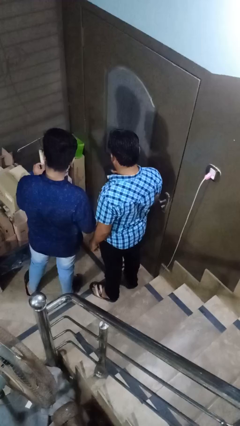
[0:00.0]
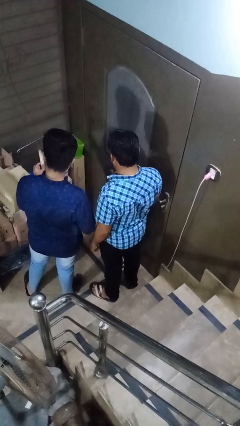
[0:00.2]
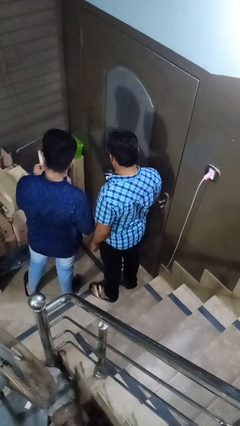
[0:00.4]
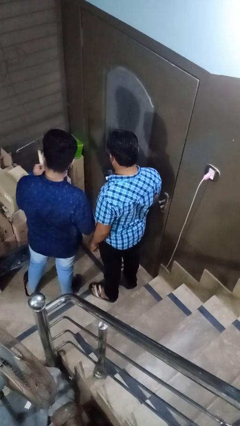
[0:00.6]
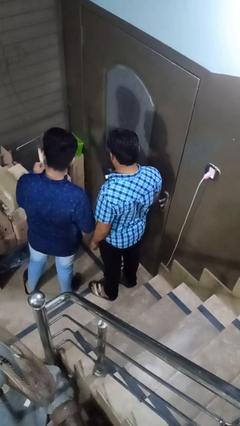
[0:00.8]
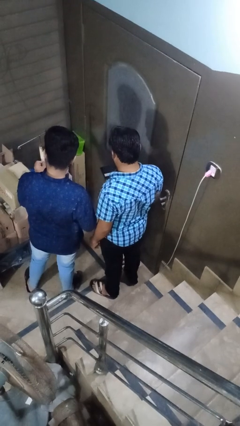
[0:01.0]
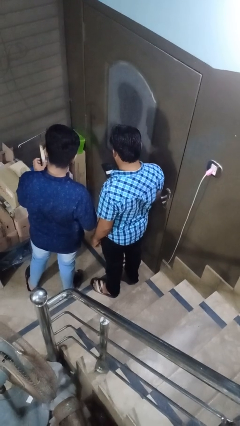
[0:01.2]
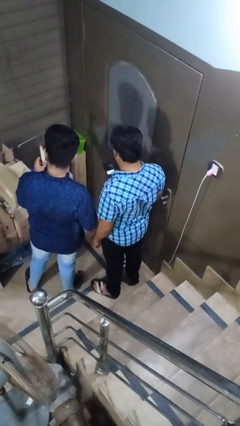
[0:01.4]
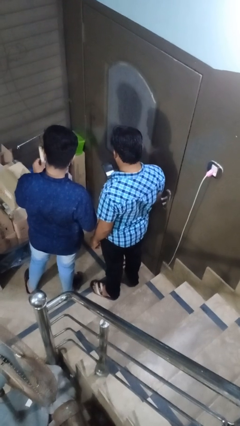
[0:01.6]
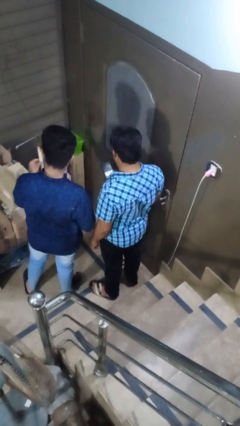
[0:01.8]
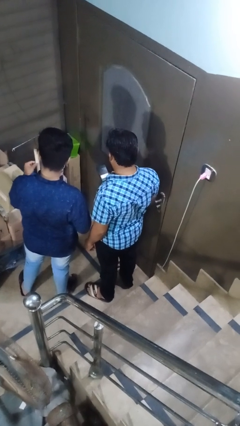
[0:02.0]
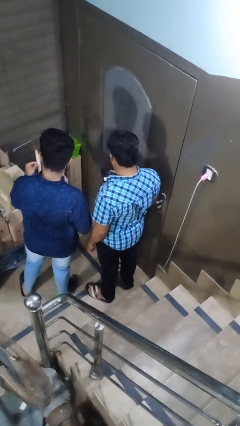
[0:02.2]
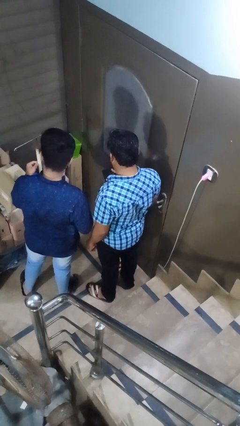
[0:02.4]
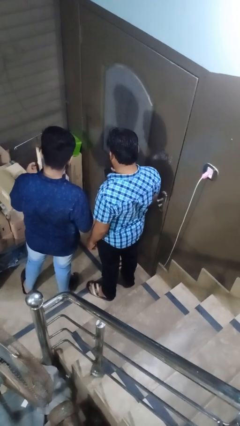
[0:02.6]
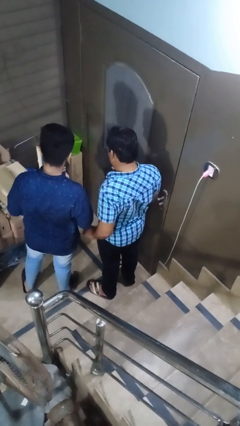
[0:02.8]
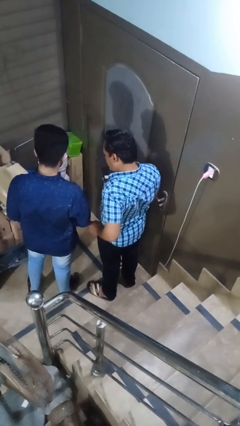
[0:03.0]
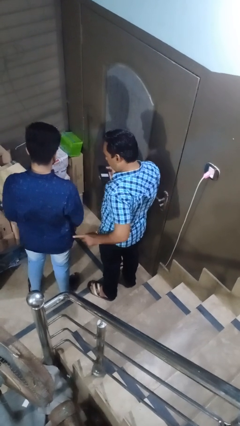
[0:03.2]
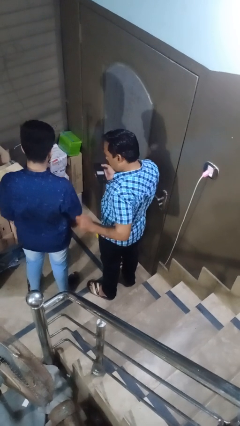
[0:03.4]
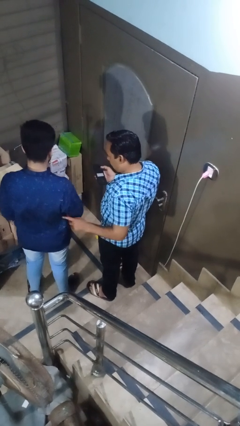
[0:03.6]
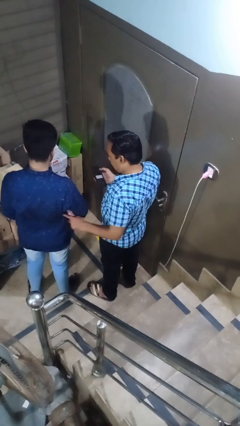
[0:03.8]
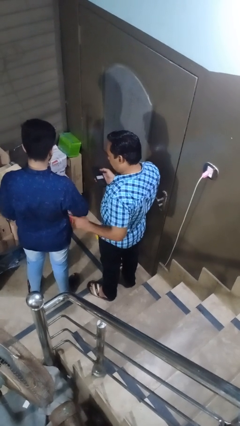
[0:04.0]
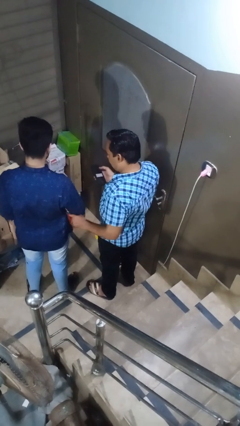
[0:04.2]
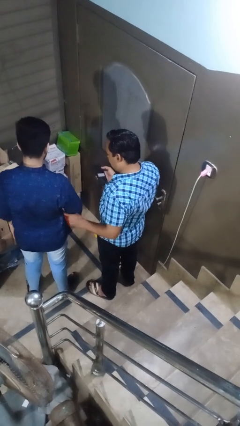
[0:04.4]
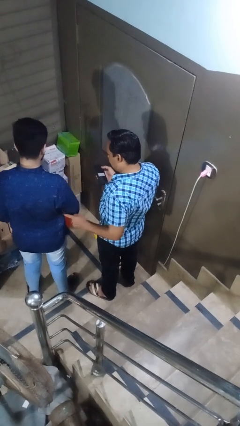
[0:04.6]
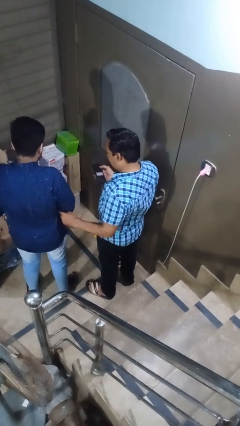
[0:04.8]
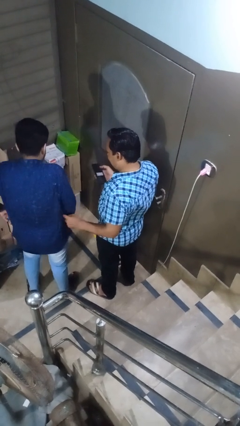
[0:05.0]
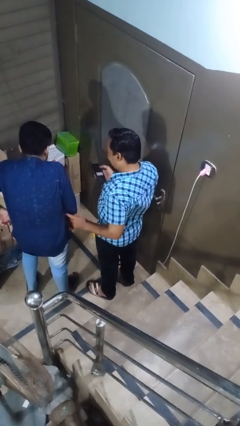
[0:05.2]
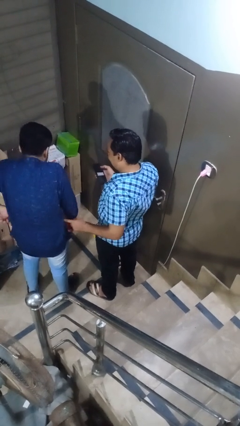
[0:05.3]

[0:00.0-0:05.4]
person tickles person

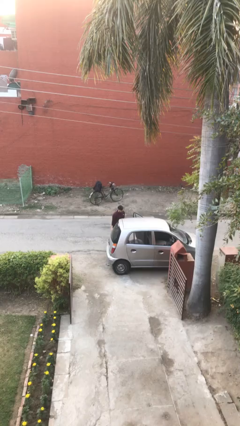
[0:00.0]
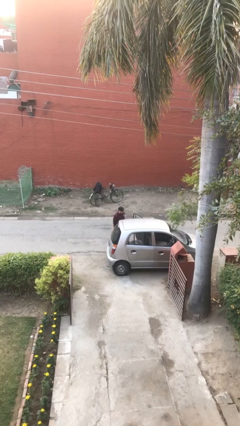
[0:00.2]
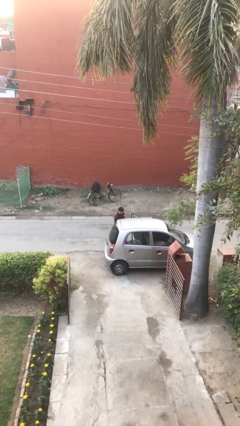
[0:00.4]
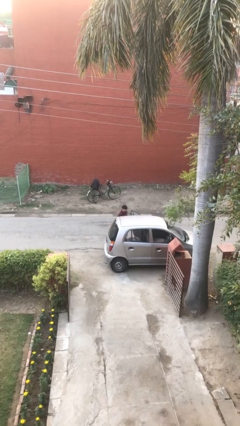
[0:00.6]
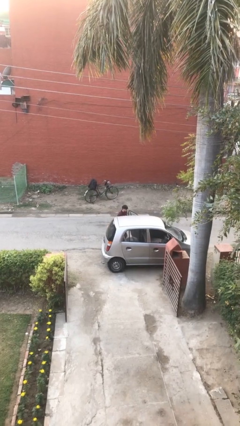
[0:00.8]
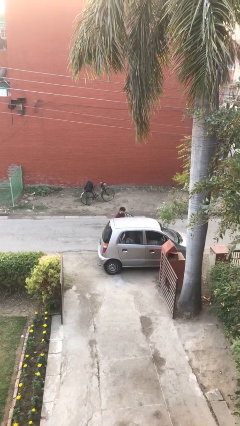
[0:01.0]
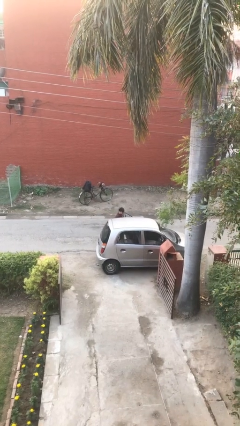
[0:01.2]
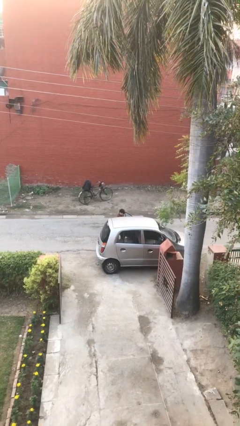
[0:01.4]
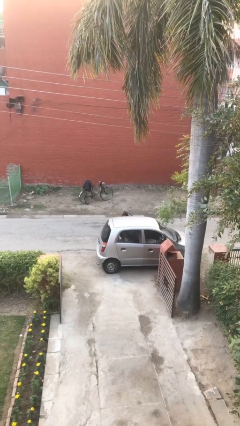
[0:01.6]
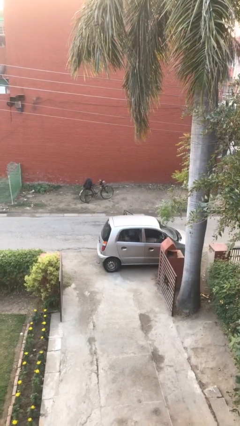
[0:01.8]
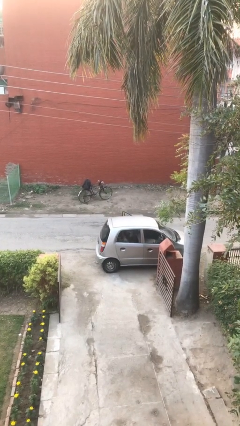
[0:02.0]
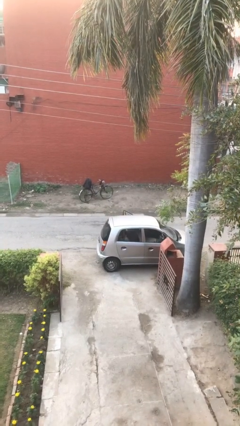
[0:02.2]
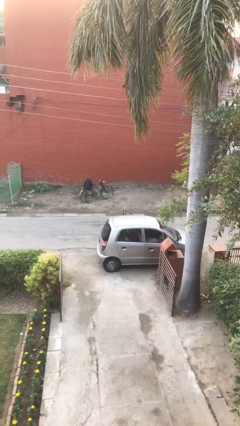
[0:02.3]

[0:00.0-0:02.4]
person enters car

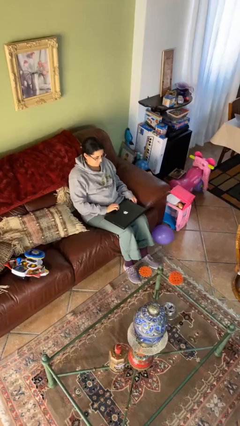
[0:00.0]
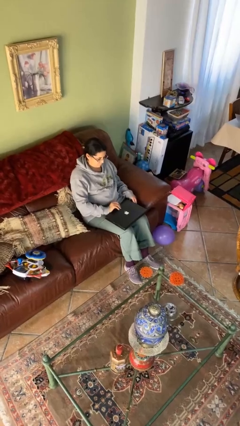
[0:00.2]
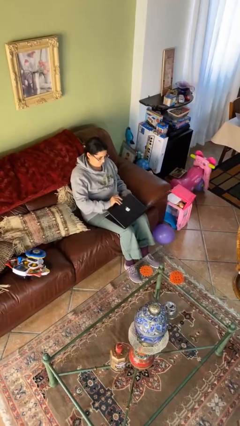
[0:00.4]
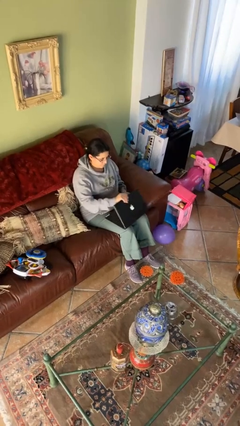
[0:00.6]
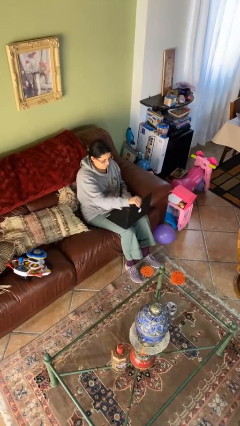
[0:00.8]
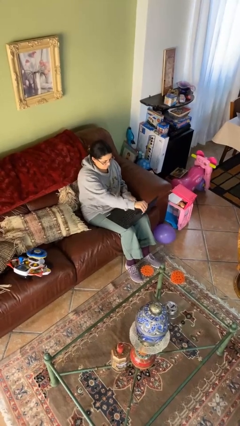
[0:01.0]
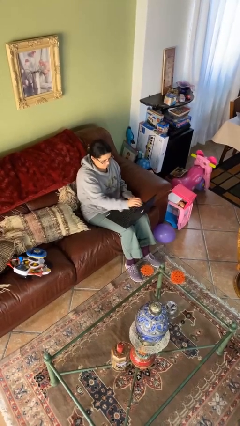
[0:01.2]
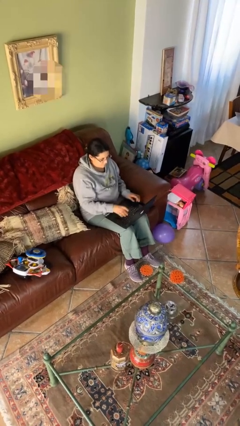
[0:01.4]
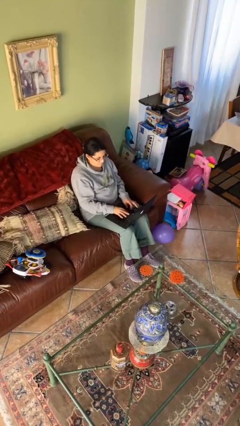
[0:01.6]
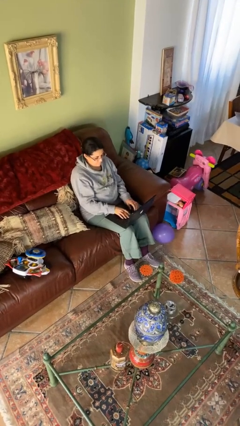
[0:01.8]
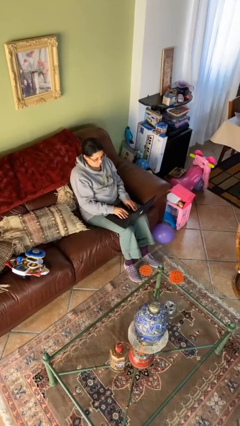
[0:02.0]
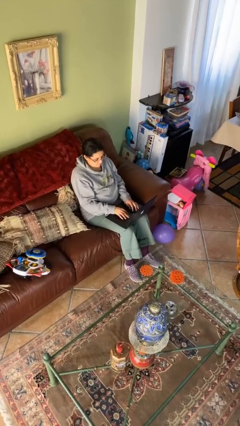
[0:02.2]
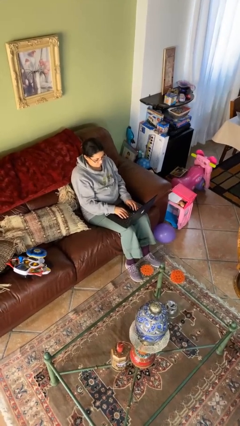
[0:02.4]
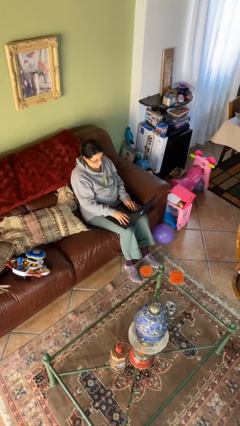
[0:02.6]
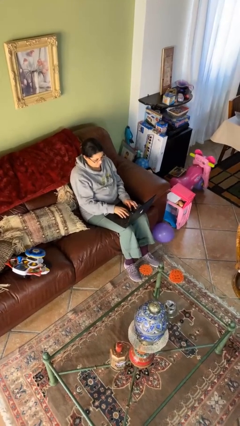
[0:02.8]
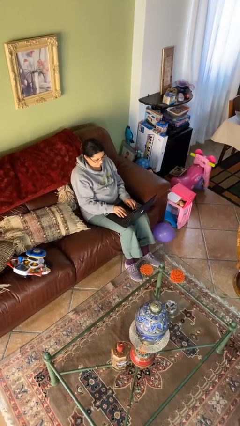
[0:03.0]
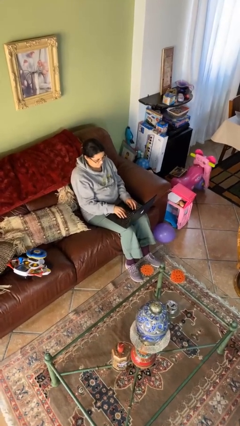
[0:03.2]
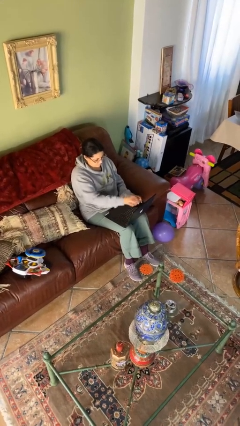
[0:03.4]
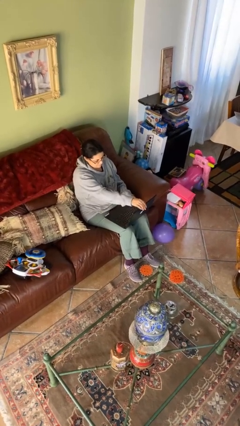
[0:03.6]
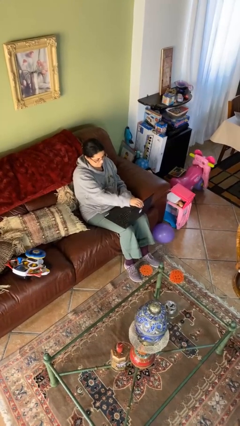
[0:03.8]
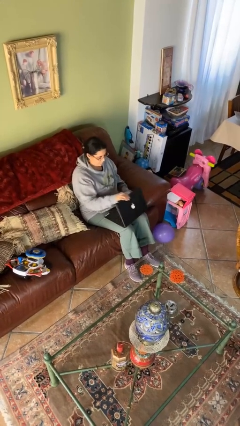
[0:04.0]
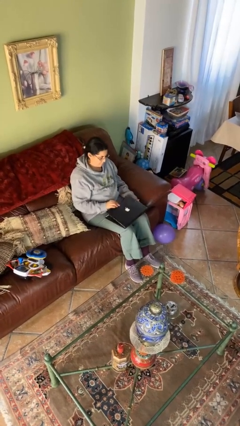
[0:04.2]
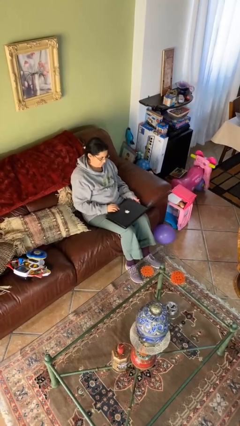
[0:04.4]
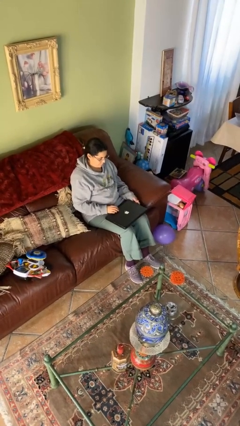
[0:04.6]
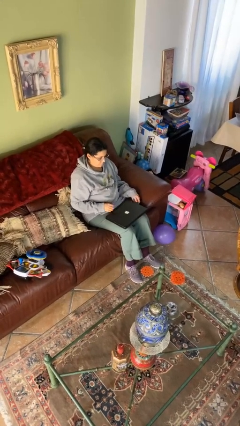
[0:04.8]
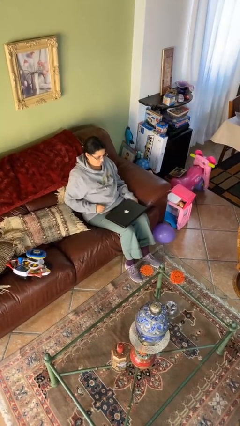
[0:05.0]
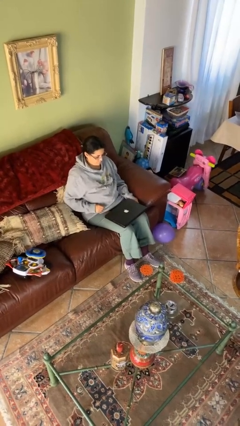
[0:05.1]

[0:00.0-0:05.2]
person interacts with laptop

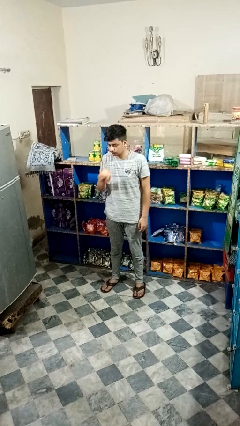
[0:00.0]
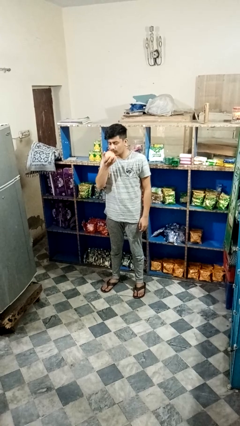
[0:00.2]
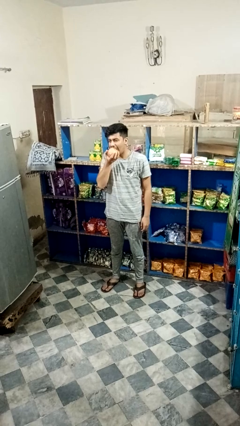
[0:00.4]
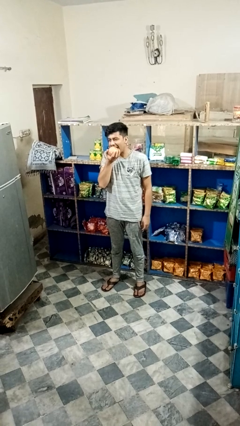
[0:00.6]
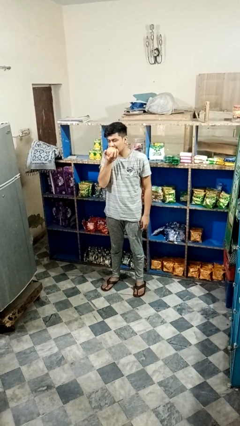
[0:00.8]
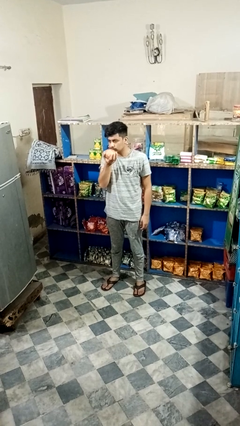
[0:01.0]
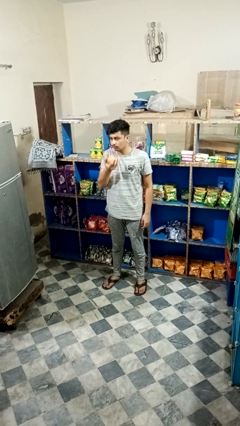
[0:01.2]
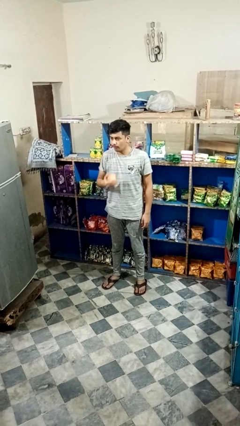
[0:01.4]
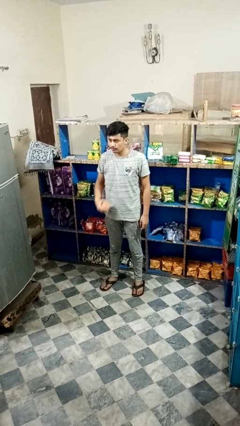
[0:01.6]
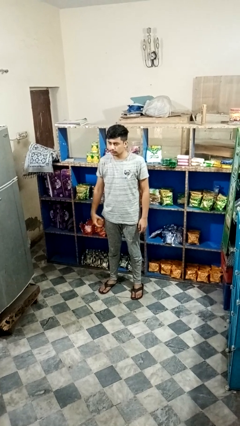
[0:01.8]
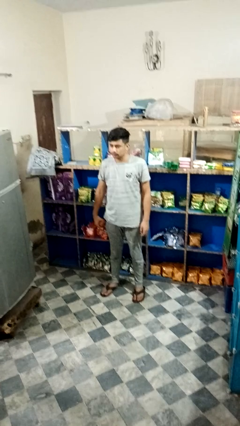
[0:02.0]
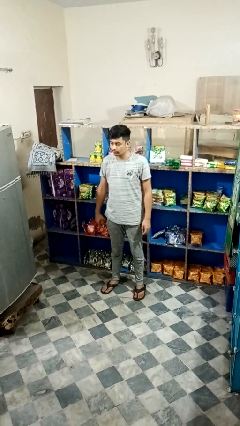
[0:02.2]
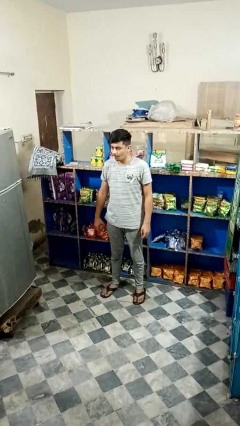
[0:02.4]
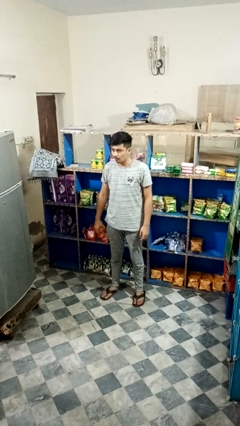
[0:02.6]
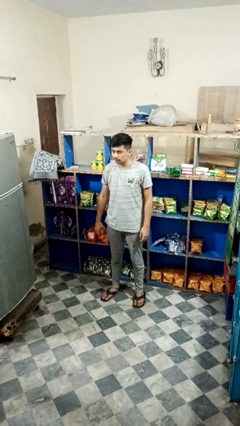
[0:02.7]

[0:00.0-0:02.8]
person eats apple

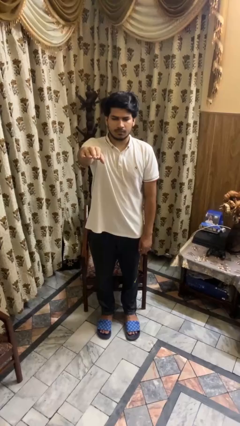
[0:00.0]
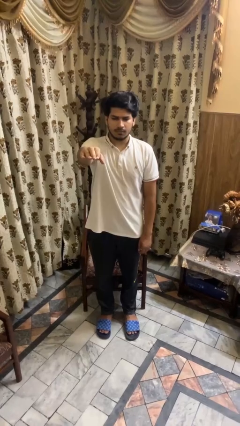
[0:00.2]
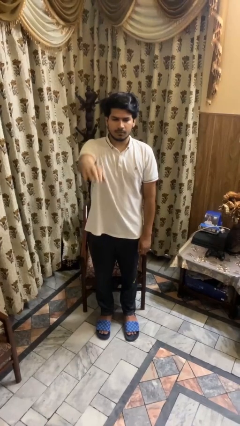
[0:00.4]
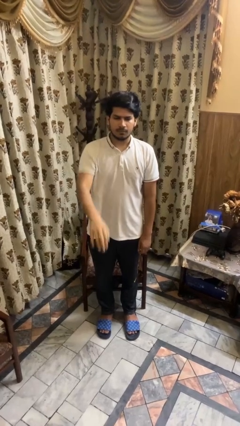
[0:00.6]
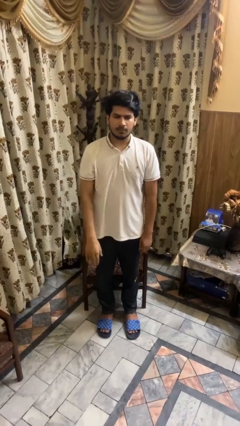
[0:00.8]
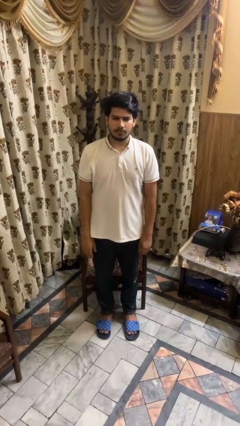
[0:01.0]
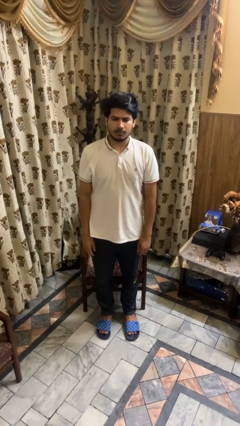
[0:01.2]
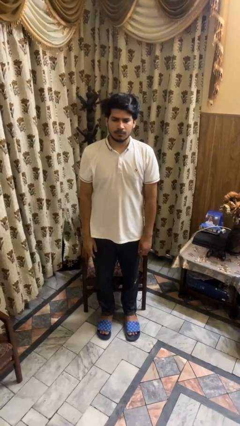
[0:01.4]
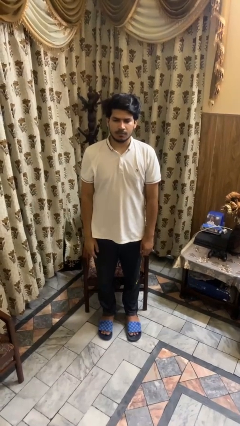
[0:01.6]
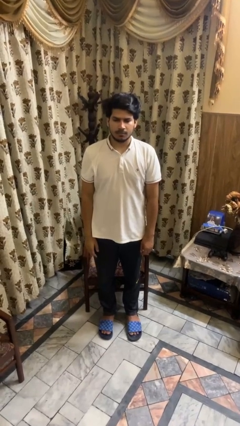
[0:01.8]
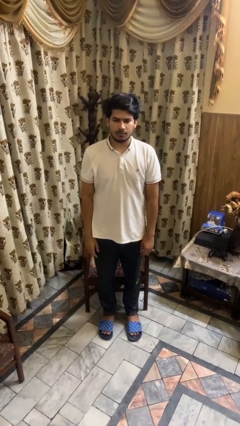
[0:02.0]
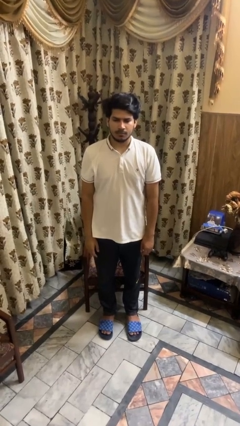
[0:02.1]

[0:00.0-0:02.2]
person gestures swipe down
